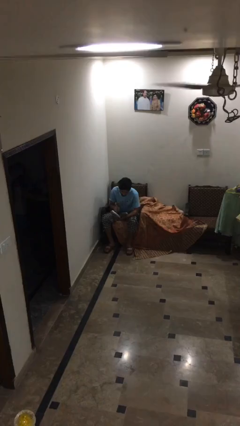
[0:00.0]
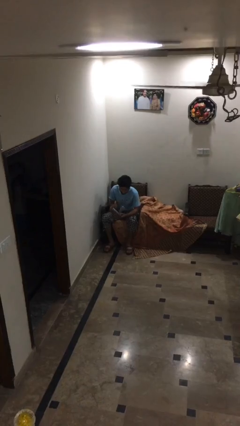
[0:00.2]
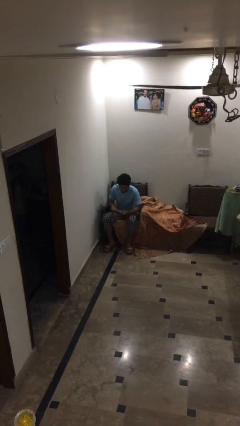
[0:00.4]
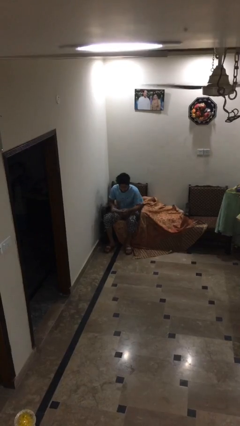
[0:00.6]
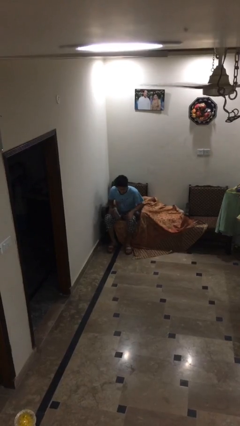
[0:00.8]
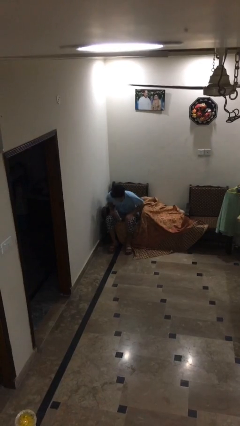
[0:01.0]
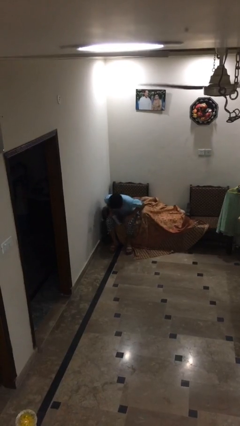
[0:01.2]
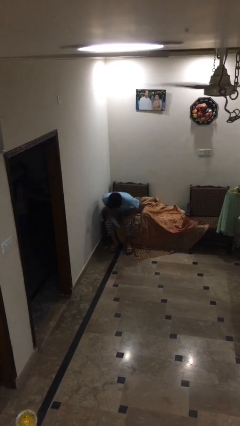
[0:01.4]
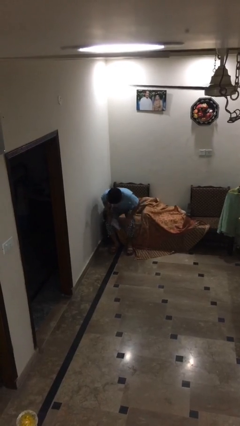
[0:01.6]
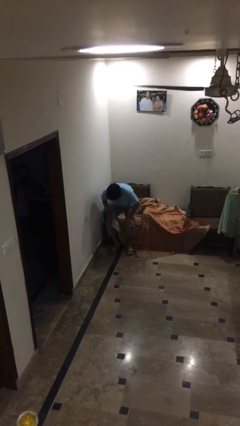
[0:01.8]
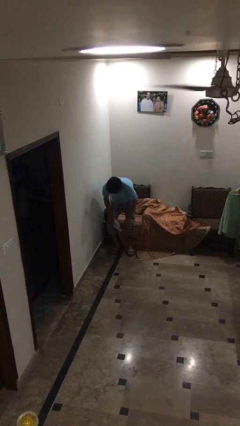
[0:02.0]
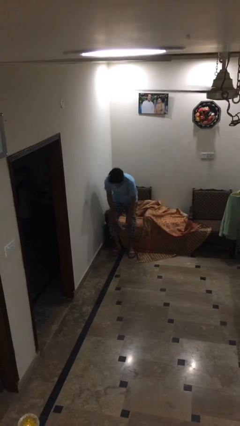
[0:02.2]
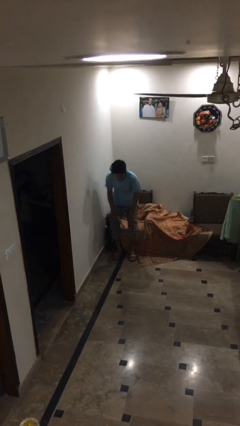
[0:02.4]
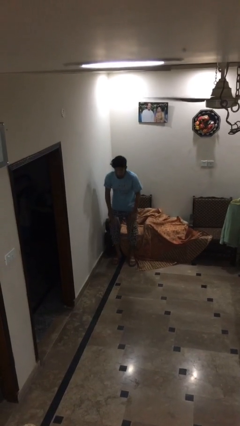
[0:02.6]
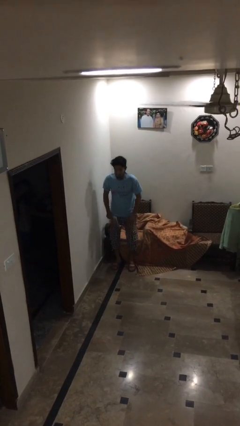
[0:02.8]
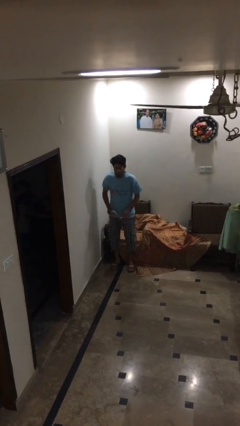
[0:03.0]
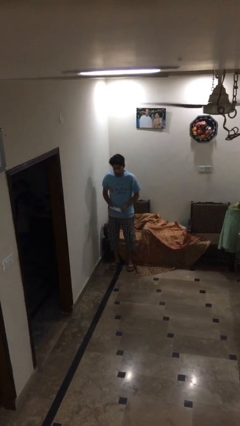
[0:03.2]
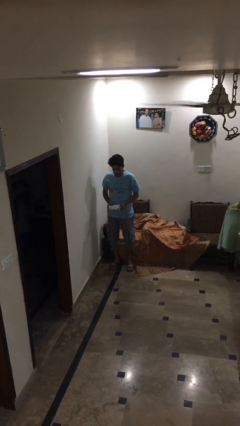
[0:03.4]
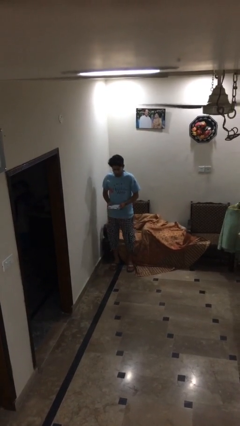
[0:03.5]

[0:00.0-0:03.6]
person stands up

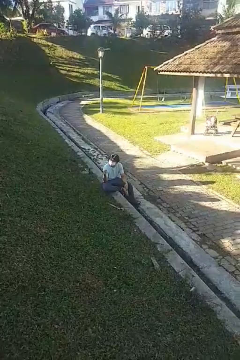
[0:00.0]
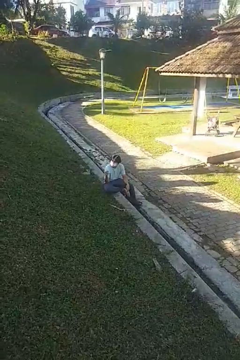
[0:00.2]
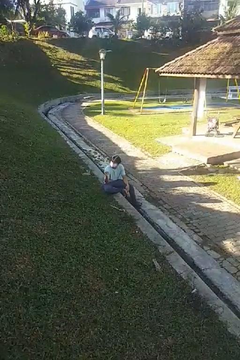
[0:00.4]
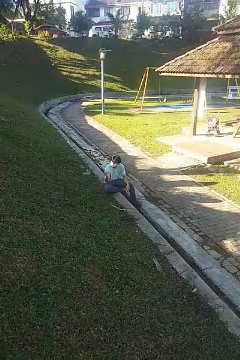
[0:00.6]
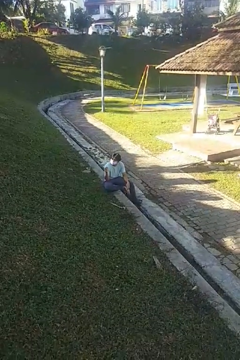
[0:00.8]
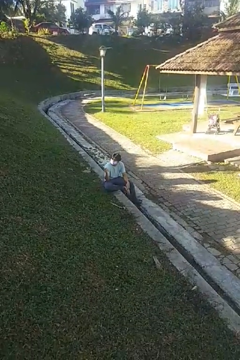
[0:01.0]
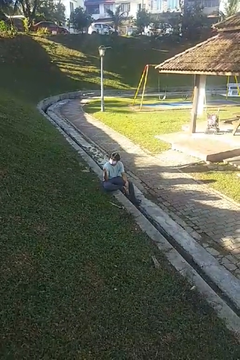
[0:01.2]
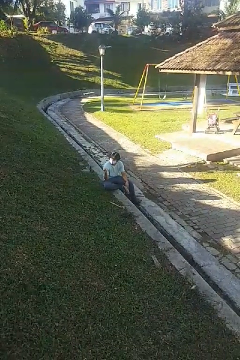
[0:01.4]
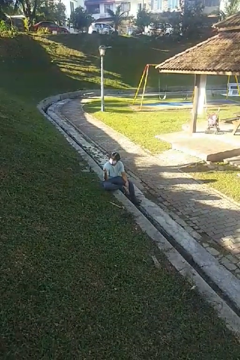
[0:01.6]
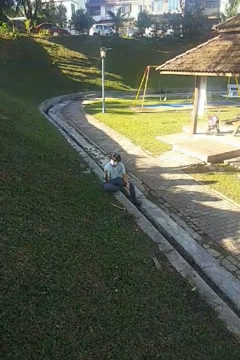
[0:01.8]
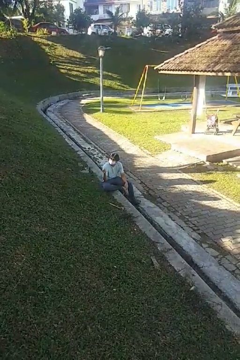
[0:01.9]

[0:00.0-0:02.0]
person snaps fingers

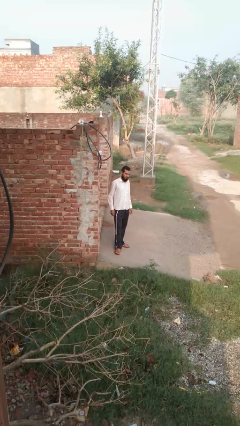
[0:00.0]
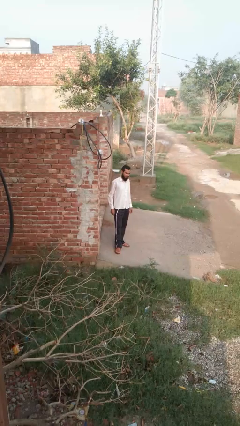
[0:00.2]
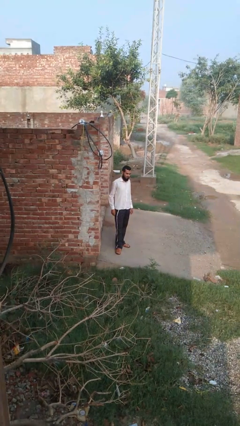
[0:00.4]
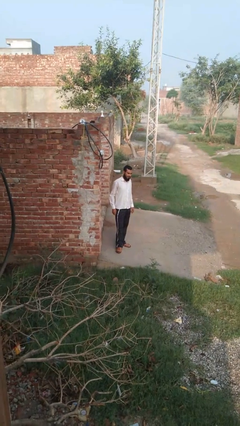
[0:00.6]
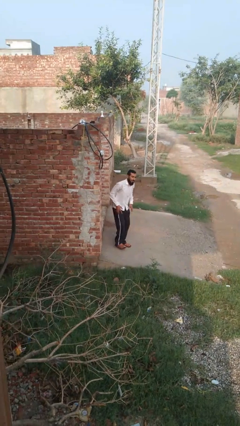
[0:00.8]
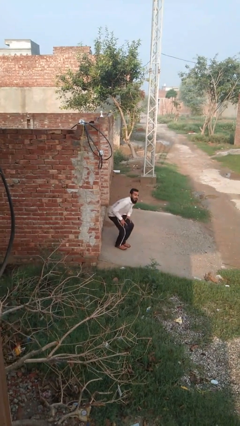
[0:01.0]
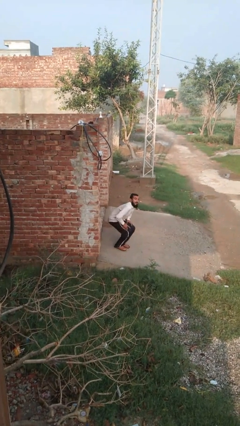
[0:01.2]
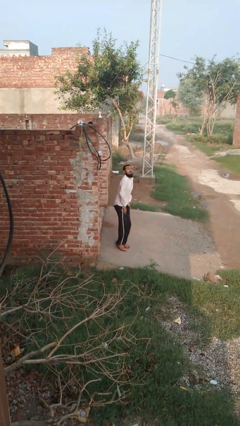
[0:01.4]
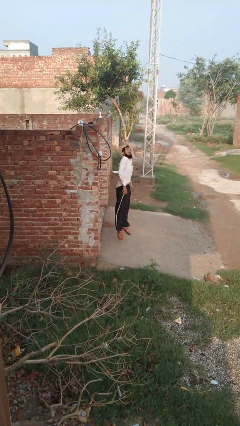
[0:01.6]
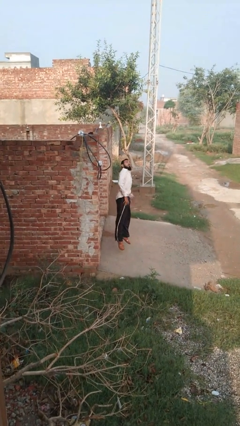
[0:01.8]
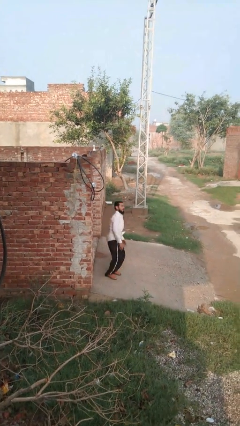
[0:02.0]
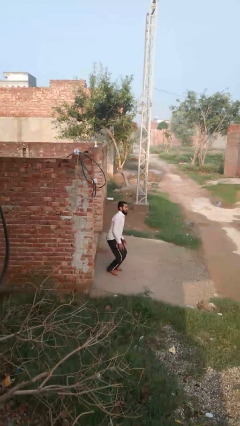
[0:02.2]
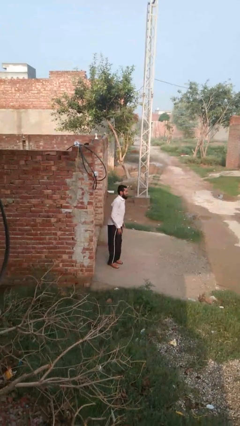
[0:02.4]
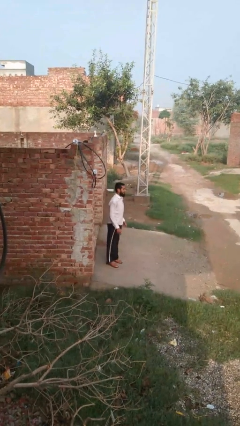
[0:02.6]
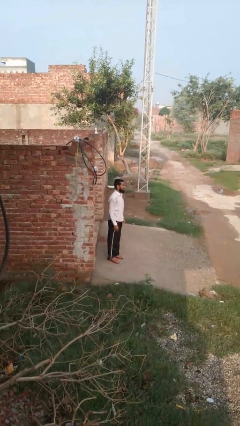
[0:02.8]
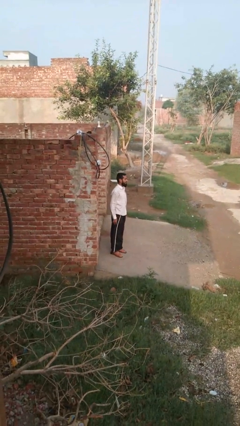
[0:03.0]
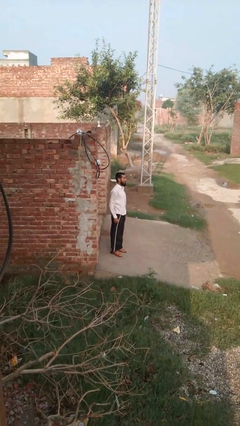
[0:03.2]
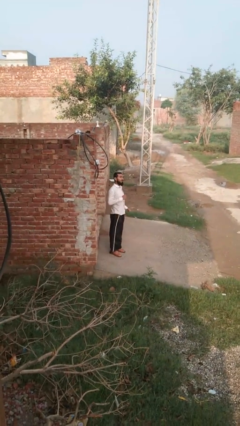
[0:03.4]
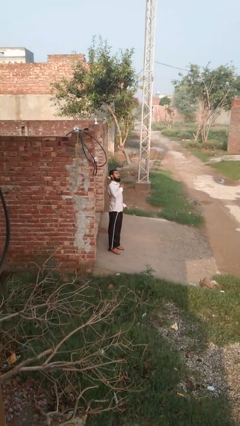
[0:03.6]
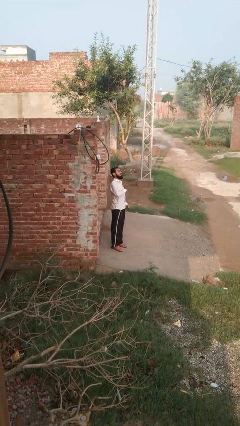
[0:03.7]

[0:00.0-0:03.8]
person jumps

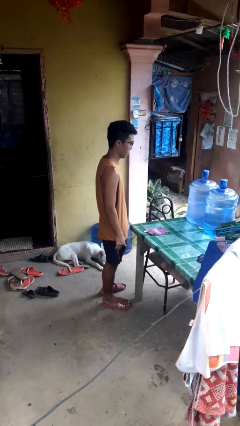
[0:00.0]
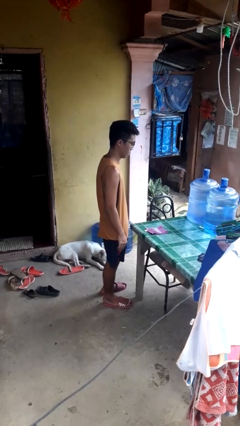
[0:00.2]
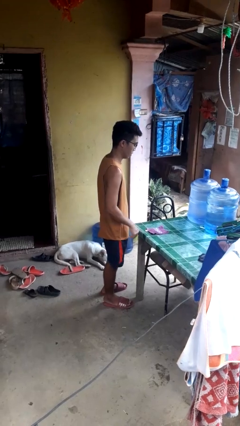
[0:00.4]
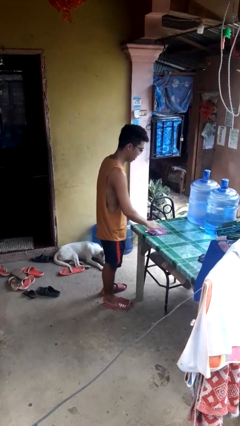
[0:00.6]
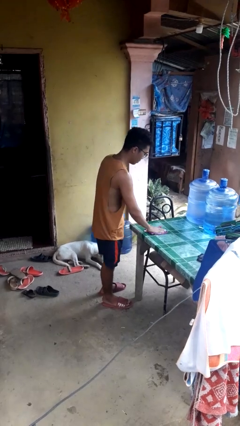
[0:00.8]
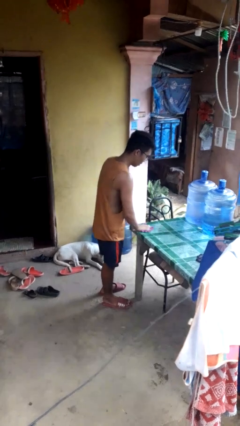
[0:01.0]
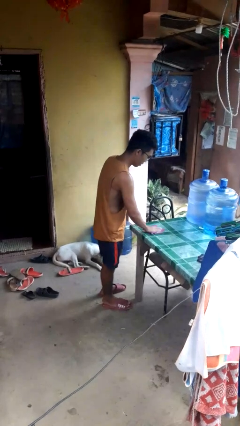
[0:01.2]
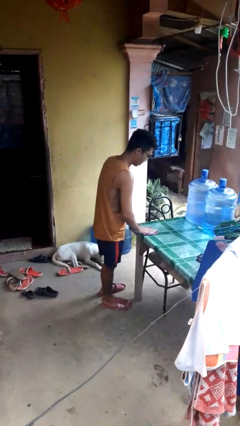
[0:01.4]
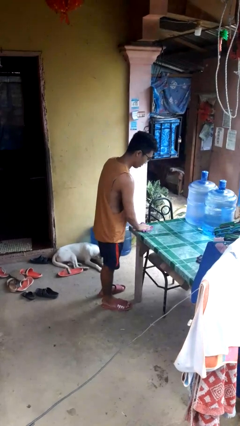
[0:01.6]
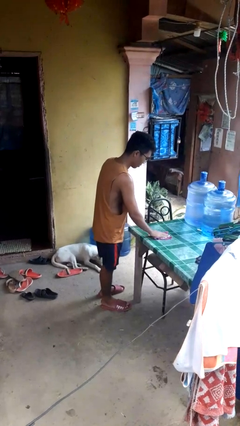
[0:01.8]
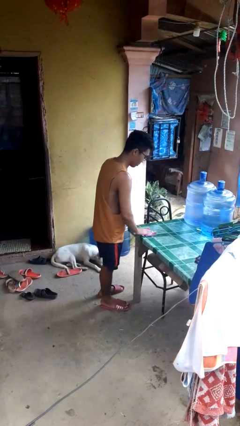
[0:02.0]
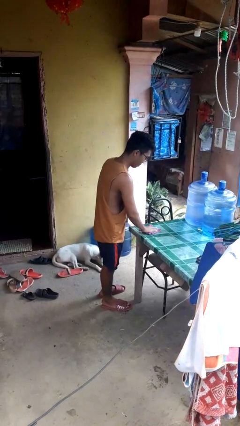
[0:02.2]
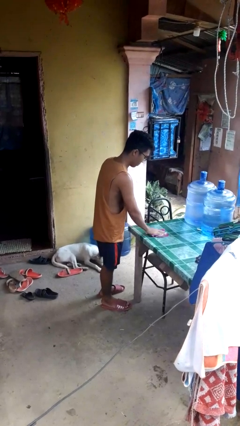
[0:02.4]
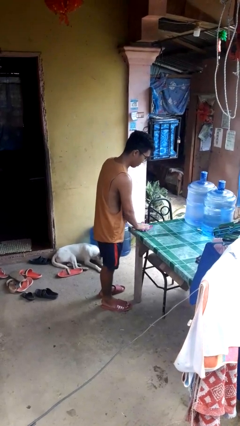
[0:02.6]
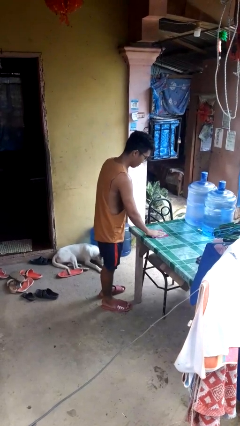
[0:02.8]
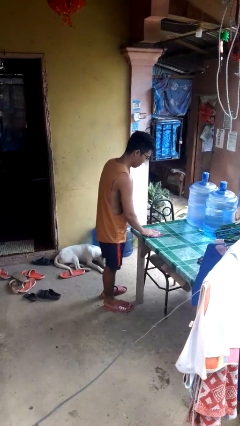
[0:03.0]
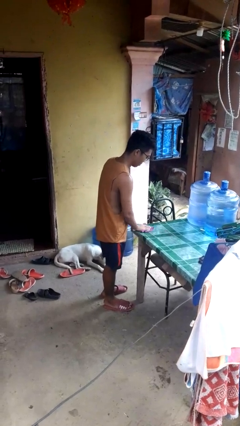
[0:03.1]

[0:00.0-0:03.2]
person cleans table with rag

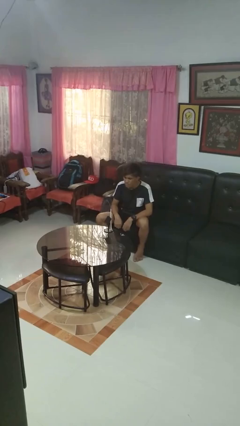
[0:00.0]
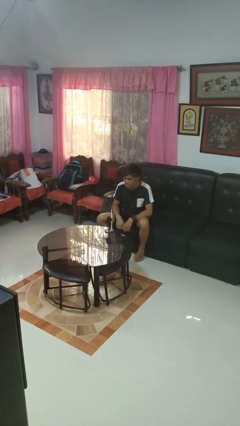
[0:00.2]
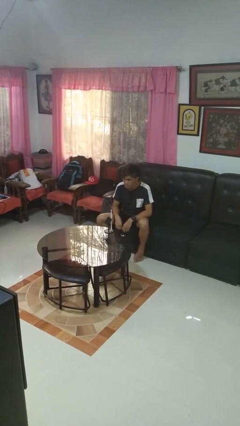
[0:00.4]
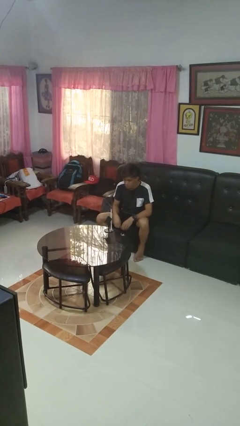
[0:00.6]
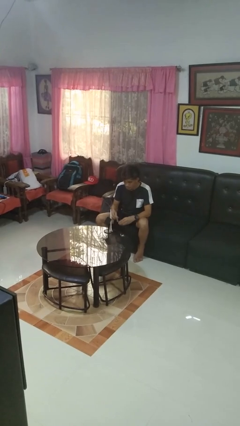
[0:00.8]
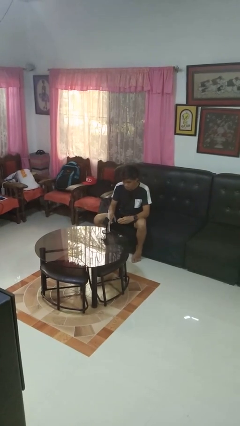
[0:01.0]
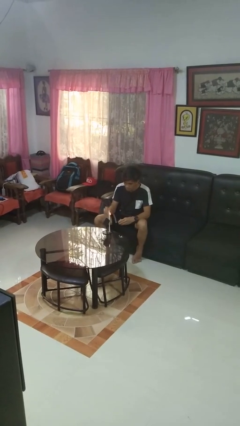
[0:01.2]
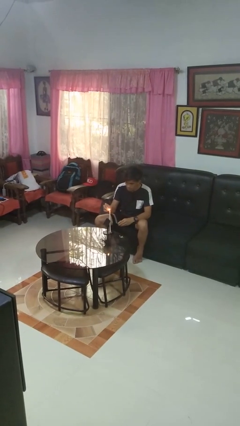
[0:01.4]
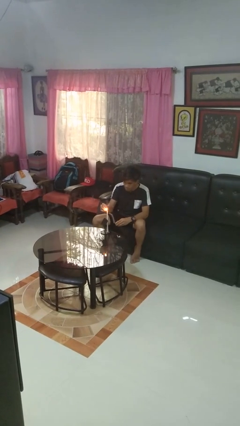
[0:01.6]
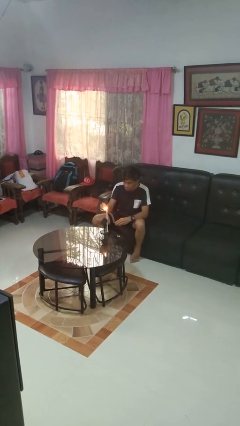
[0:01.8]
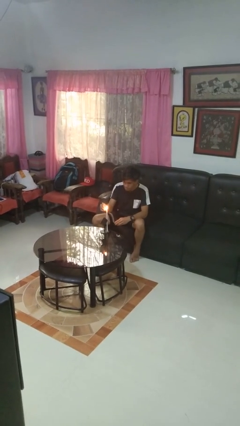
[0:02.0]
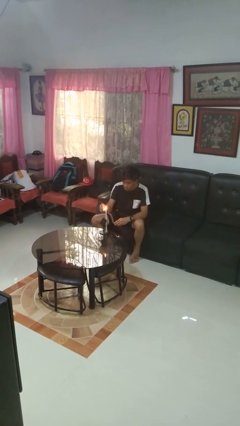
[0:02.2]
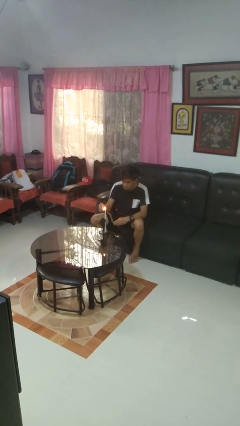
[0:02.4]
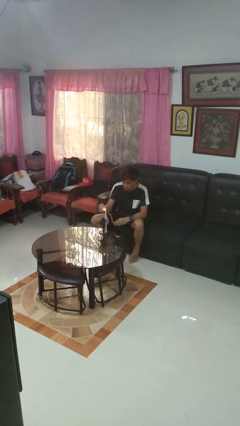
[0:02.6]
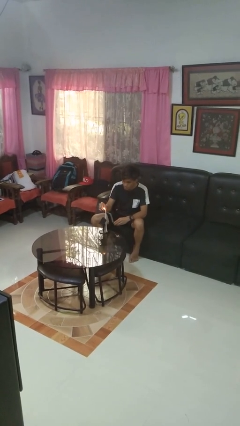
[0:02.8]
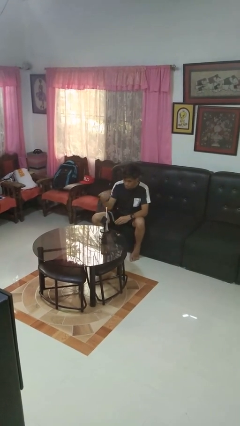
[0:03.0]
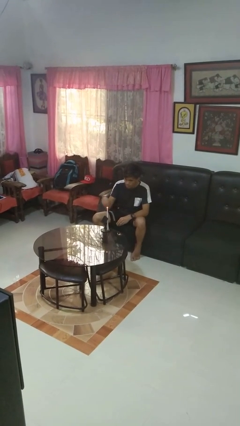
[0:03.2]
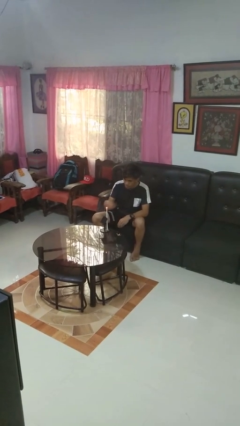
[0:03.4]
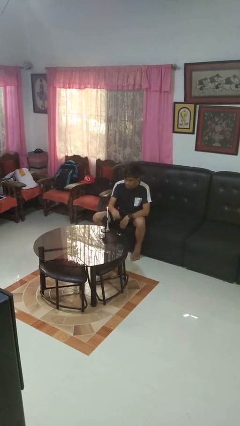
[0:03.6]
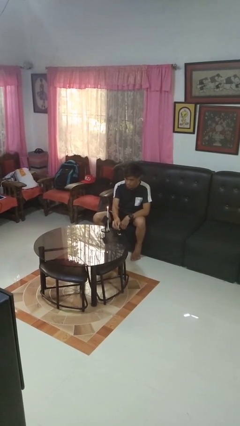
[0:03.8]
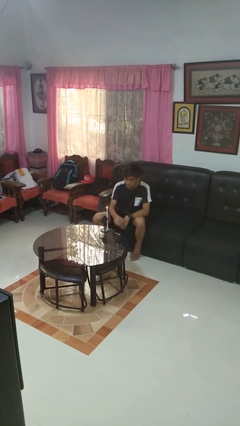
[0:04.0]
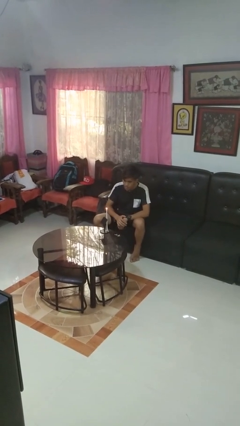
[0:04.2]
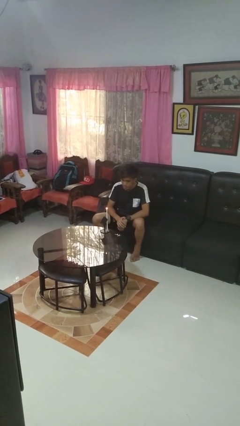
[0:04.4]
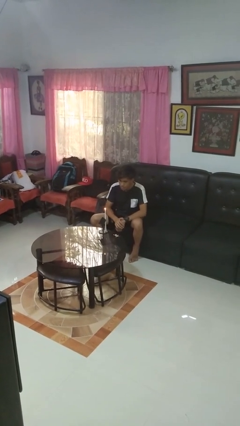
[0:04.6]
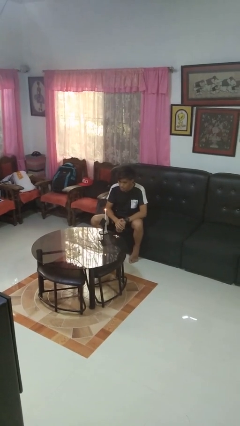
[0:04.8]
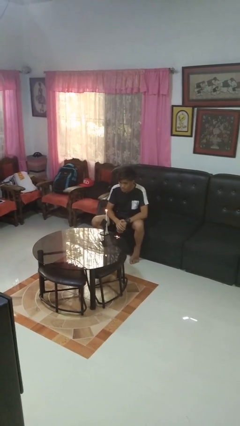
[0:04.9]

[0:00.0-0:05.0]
person lights candle

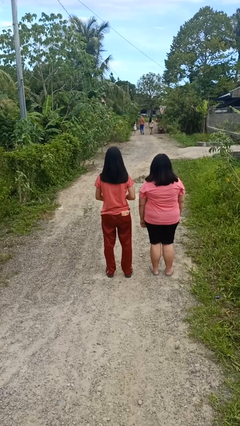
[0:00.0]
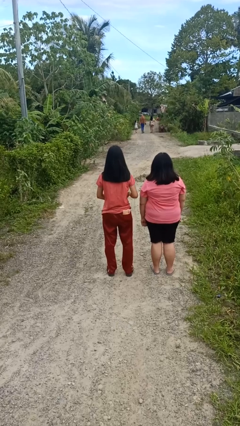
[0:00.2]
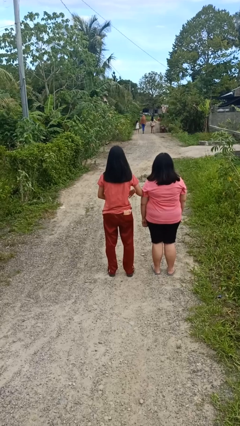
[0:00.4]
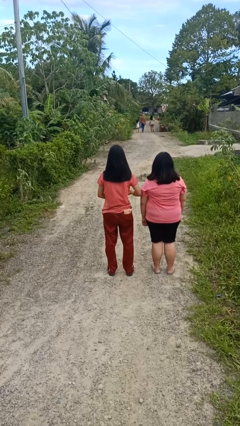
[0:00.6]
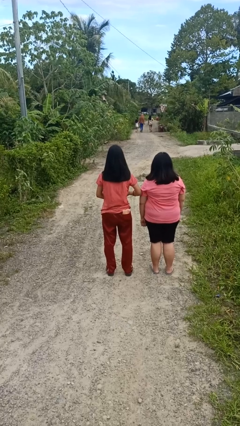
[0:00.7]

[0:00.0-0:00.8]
person nudges person with elbow
